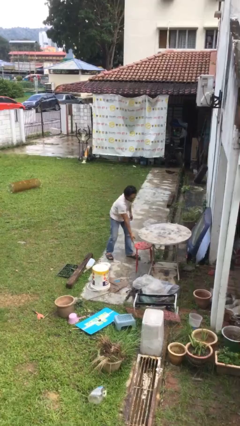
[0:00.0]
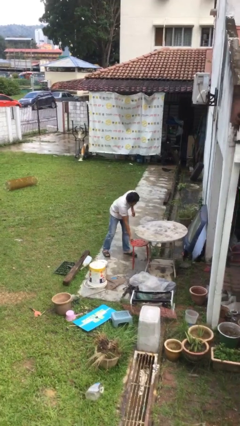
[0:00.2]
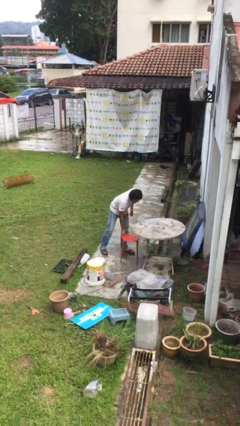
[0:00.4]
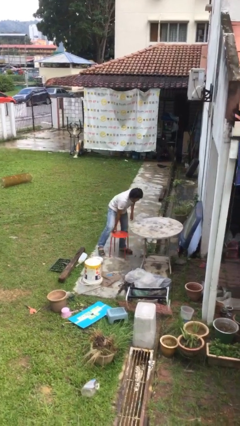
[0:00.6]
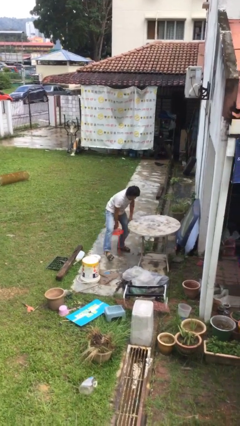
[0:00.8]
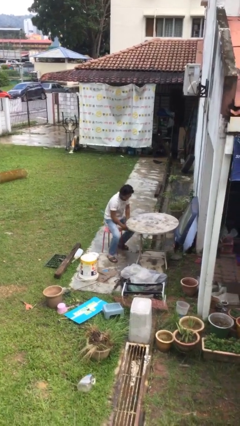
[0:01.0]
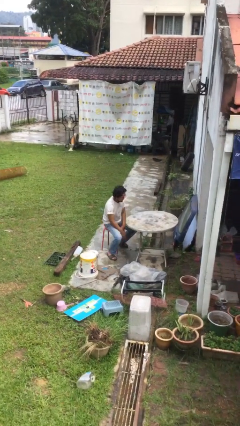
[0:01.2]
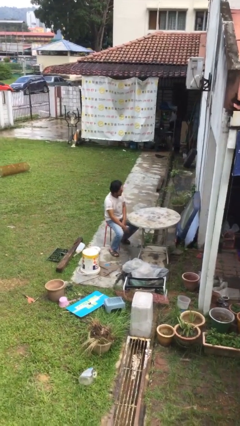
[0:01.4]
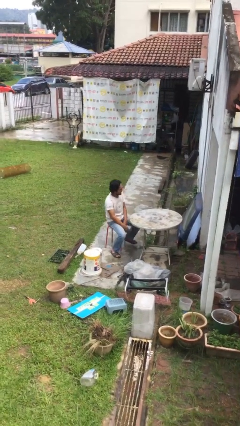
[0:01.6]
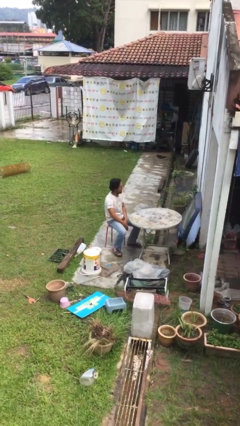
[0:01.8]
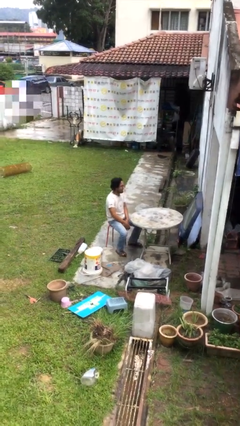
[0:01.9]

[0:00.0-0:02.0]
person sits down

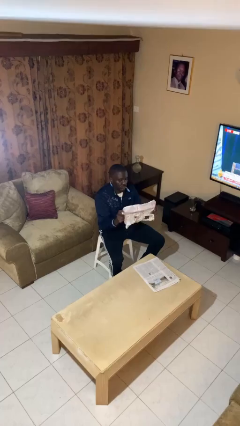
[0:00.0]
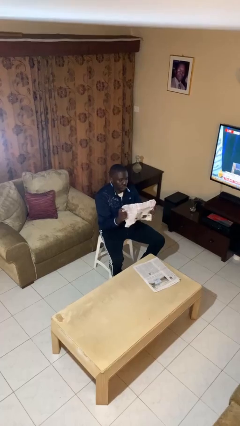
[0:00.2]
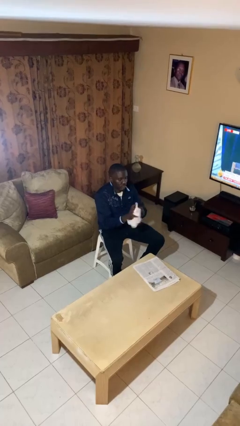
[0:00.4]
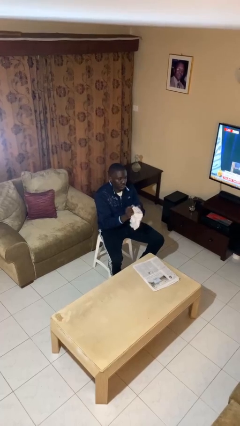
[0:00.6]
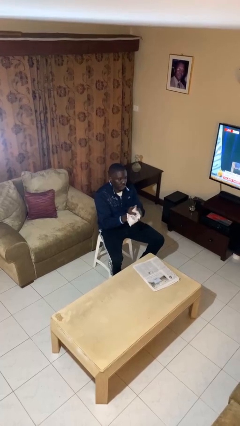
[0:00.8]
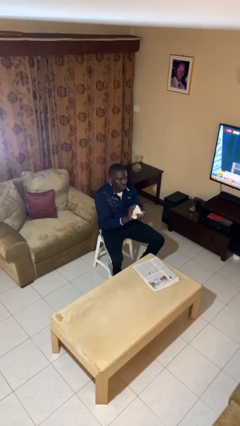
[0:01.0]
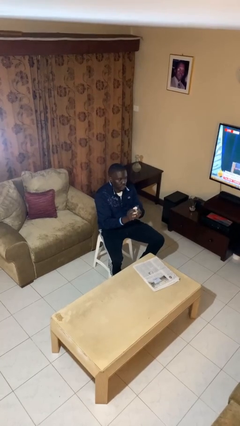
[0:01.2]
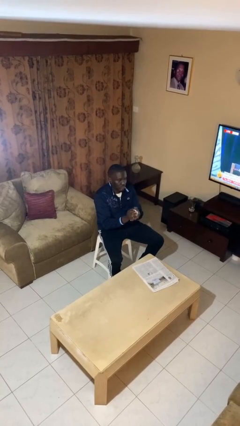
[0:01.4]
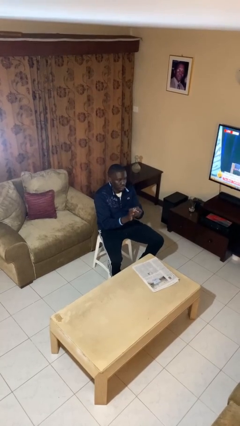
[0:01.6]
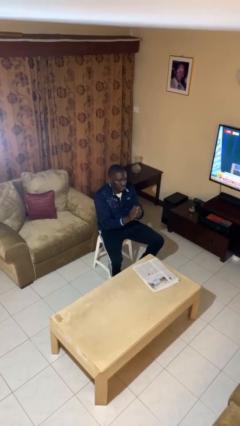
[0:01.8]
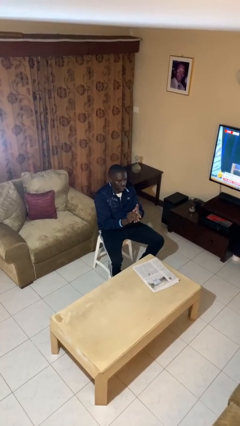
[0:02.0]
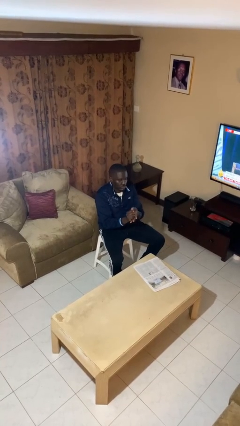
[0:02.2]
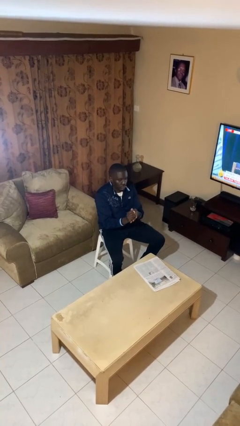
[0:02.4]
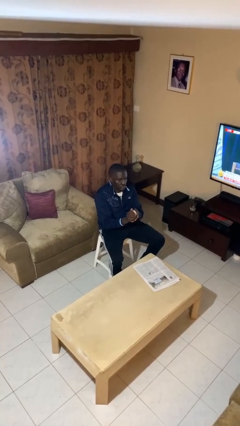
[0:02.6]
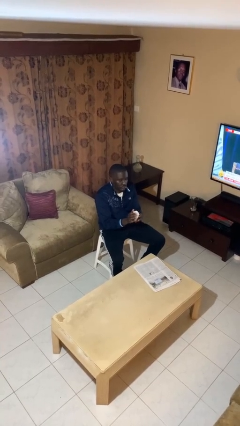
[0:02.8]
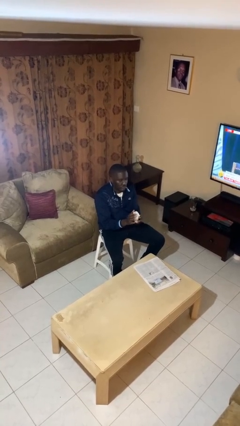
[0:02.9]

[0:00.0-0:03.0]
person crumples paper

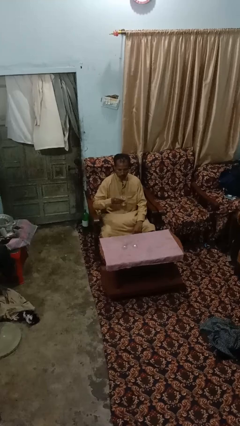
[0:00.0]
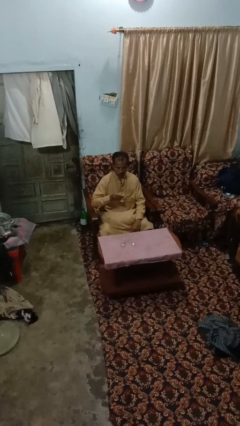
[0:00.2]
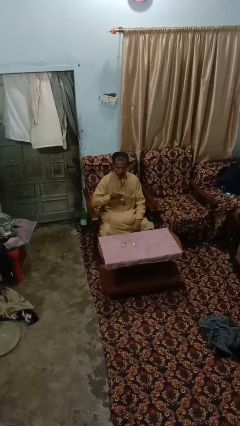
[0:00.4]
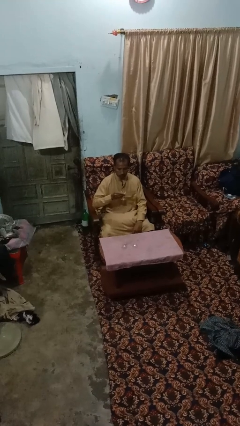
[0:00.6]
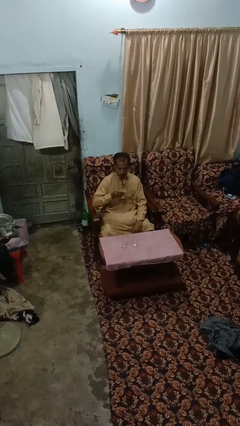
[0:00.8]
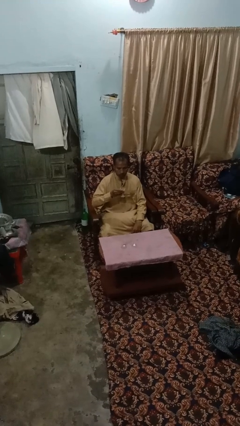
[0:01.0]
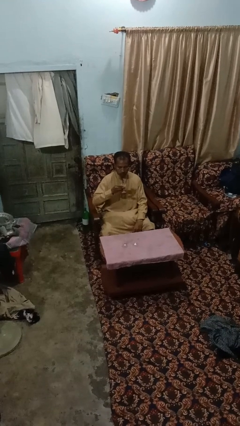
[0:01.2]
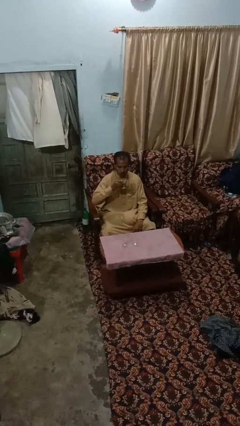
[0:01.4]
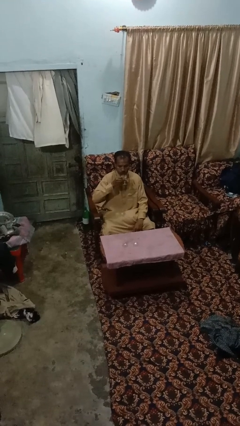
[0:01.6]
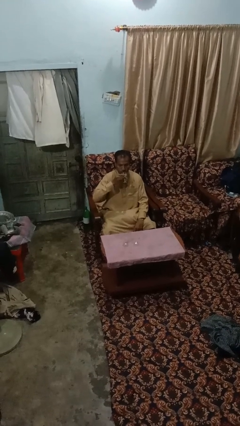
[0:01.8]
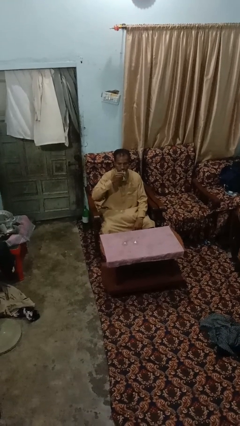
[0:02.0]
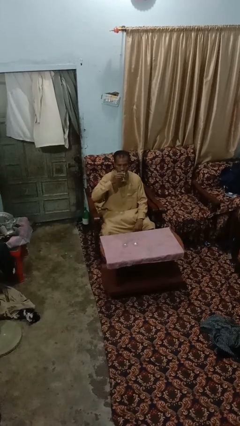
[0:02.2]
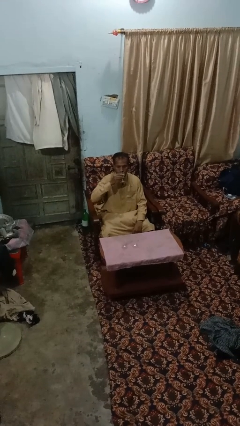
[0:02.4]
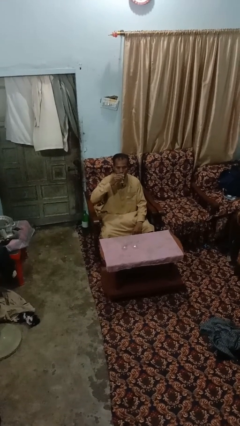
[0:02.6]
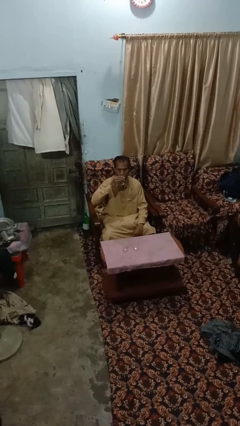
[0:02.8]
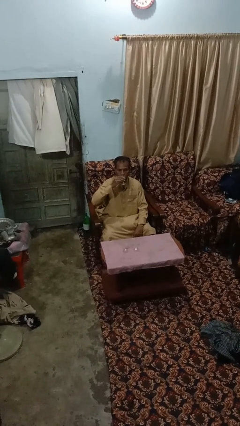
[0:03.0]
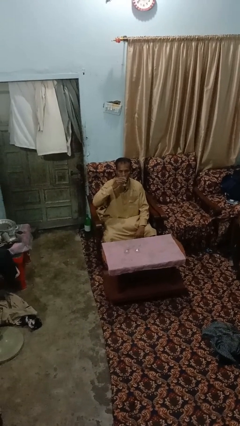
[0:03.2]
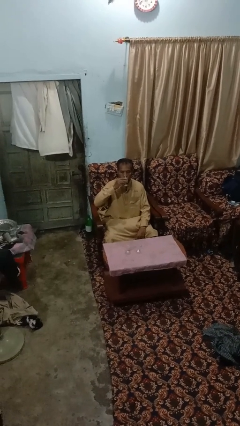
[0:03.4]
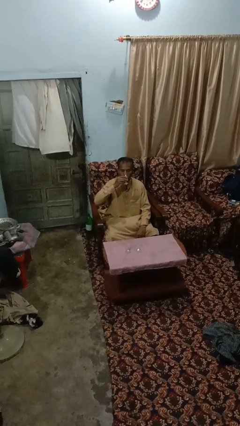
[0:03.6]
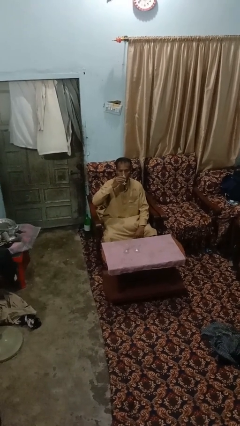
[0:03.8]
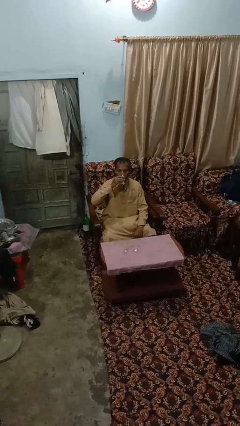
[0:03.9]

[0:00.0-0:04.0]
person drinks from shotglass

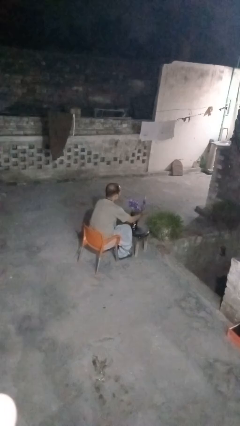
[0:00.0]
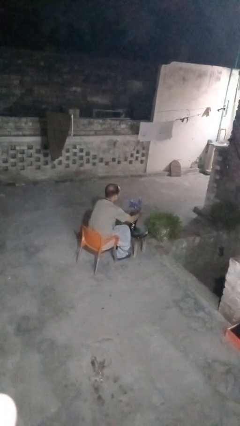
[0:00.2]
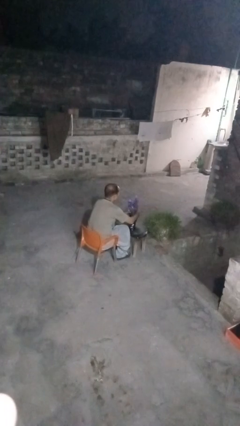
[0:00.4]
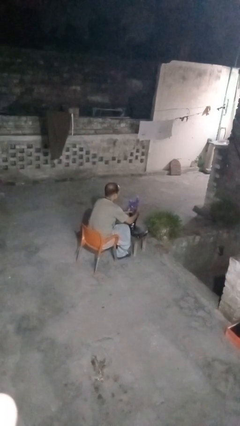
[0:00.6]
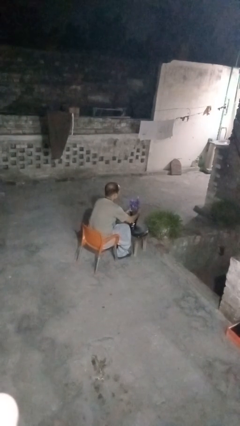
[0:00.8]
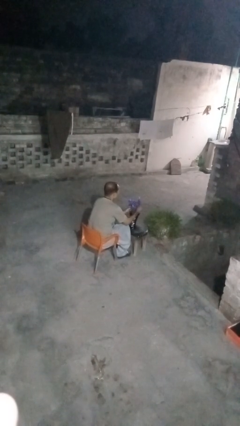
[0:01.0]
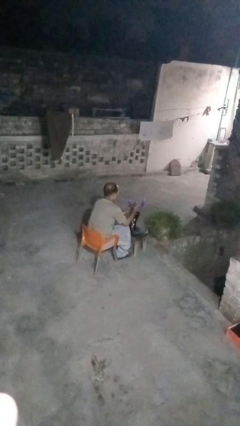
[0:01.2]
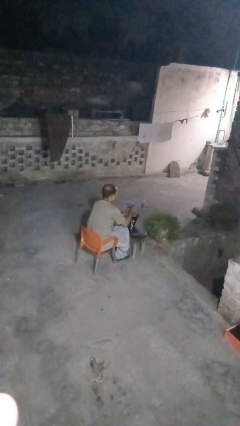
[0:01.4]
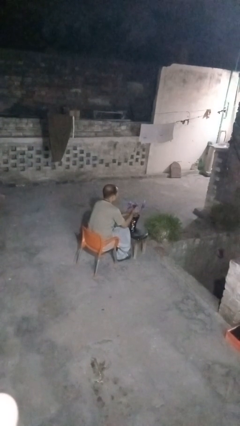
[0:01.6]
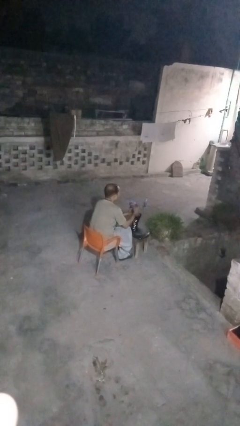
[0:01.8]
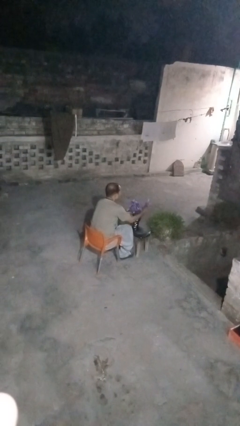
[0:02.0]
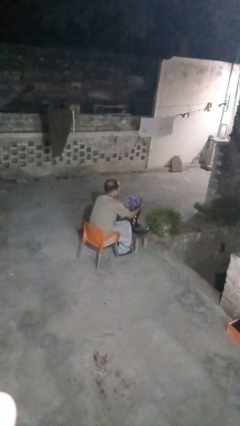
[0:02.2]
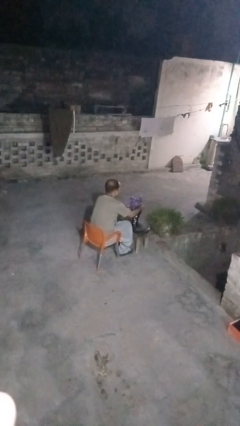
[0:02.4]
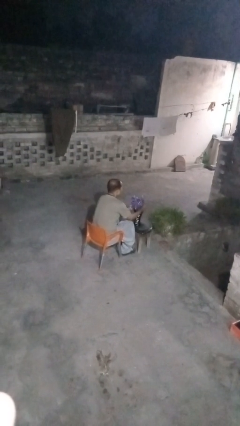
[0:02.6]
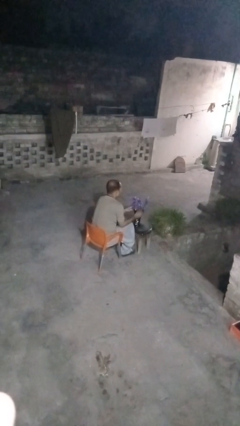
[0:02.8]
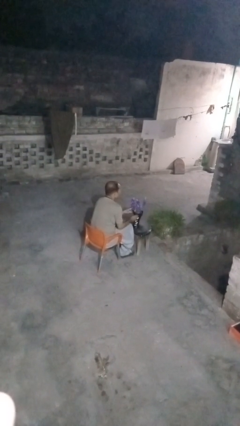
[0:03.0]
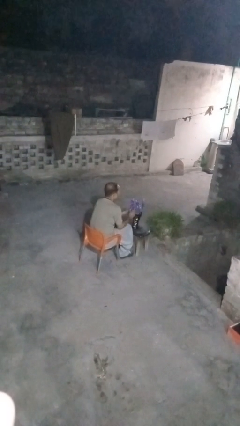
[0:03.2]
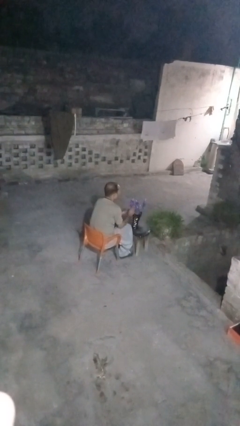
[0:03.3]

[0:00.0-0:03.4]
person arranges flowers in vase

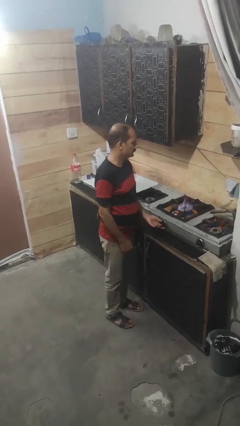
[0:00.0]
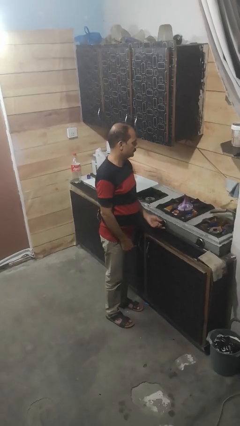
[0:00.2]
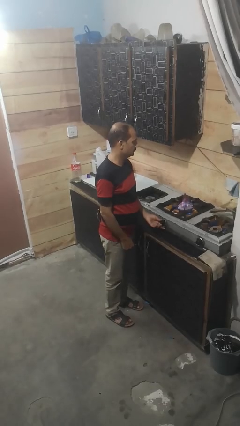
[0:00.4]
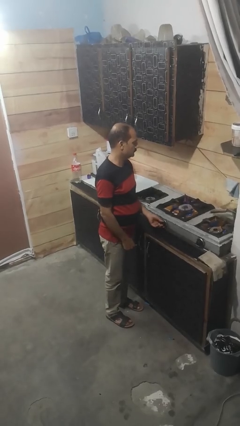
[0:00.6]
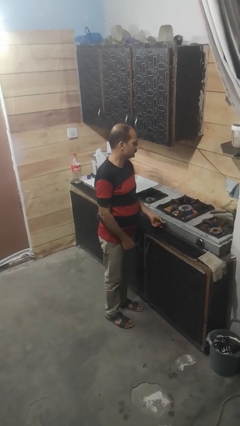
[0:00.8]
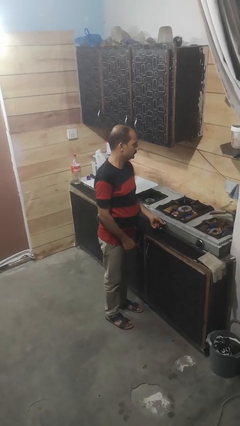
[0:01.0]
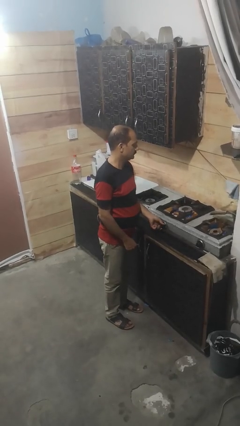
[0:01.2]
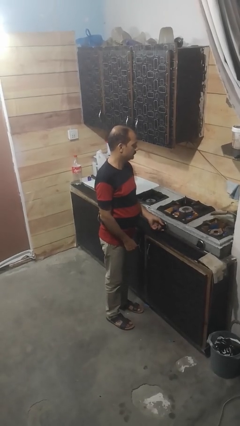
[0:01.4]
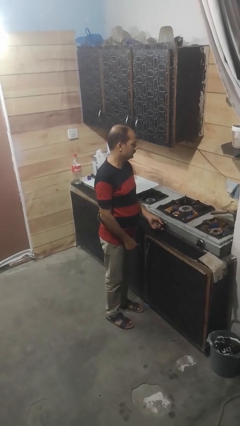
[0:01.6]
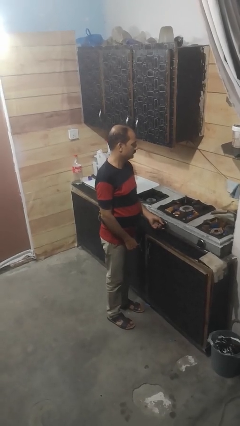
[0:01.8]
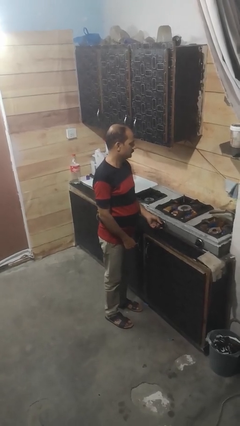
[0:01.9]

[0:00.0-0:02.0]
person turns off stovetop

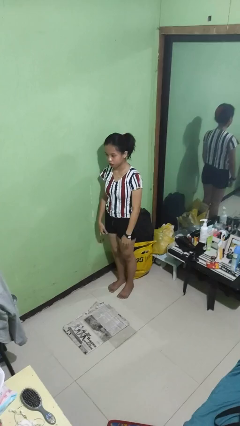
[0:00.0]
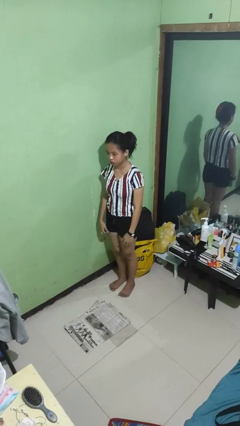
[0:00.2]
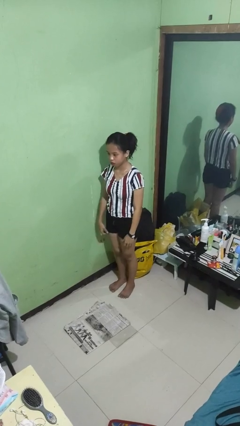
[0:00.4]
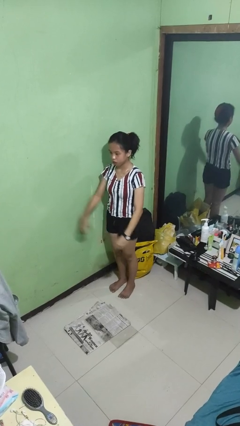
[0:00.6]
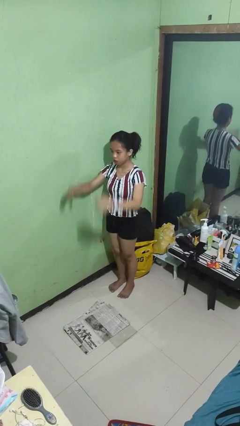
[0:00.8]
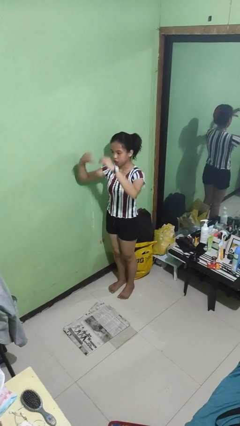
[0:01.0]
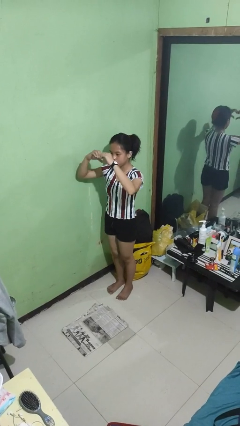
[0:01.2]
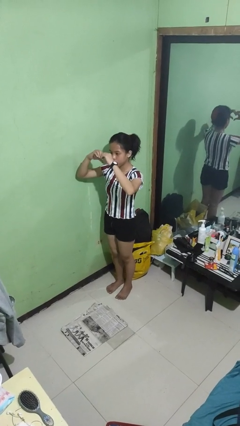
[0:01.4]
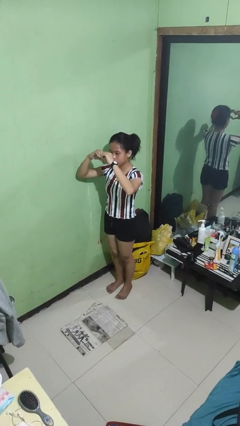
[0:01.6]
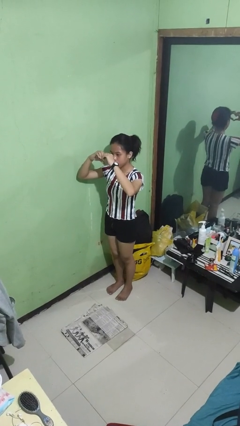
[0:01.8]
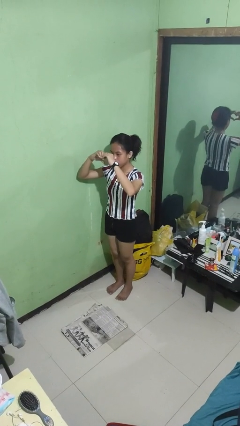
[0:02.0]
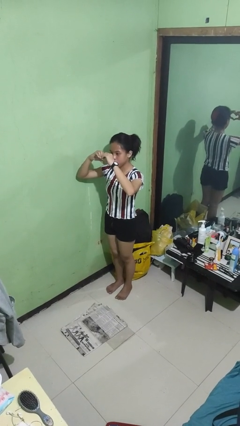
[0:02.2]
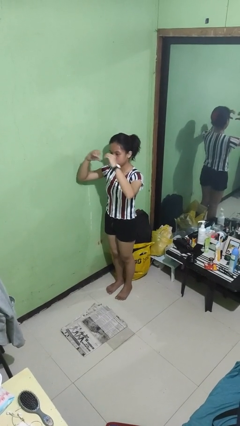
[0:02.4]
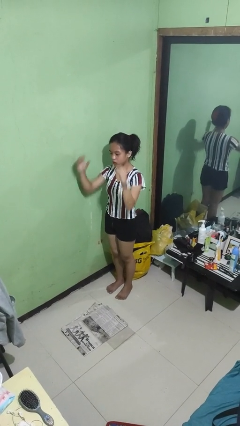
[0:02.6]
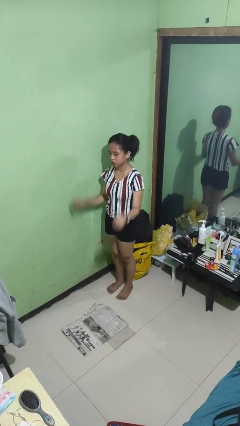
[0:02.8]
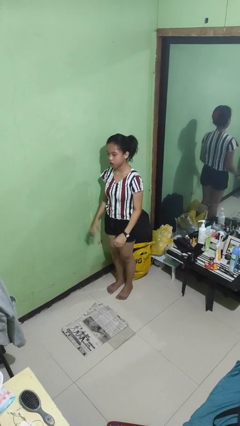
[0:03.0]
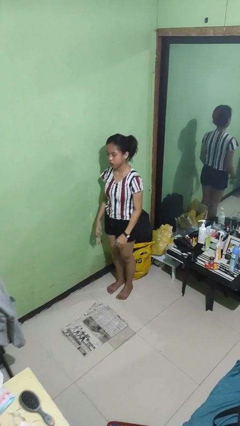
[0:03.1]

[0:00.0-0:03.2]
person gestures heart
